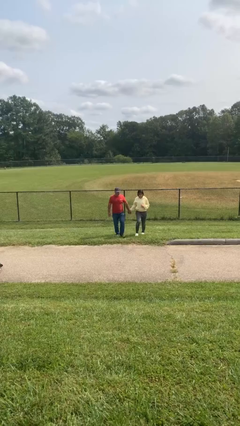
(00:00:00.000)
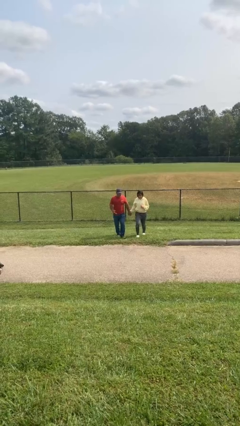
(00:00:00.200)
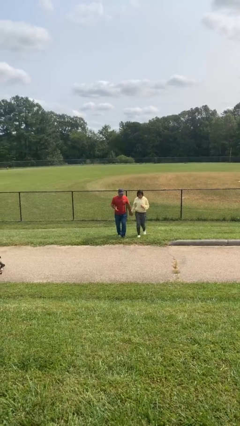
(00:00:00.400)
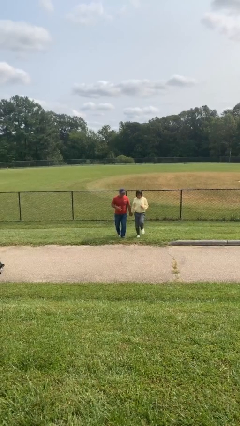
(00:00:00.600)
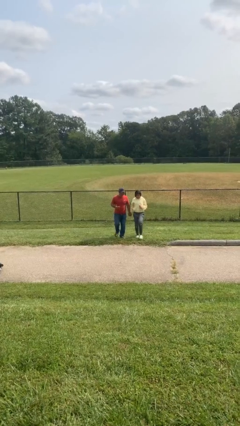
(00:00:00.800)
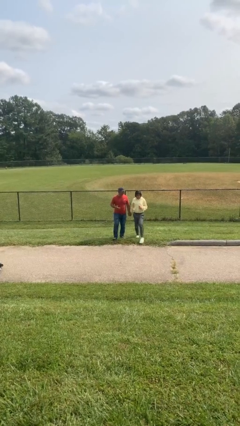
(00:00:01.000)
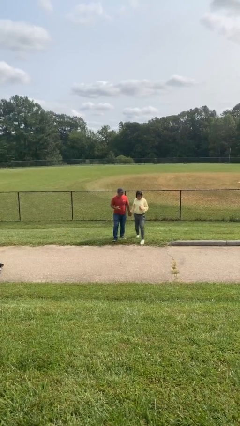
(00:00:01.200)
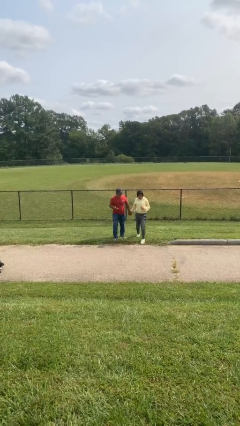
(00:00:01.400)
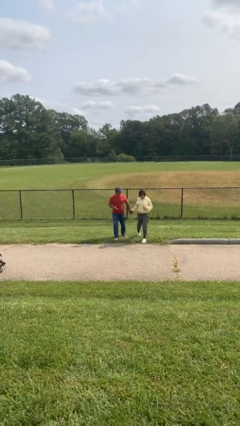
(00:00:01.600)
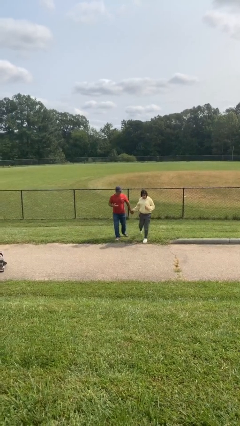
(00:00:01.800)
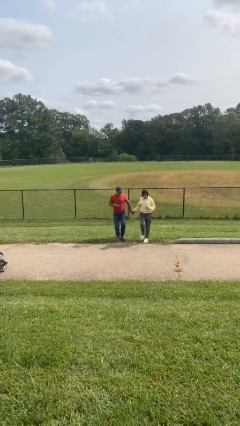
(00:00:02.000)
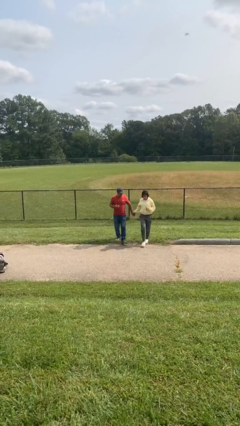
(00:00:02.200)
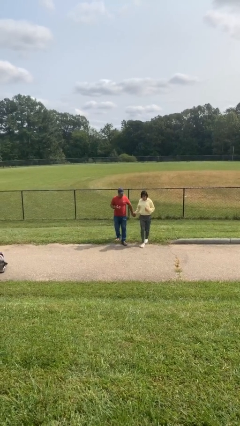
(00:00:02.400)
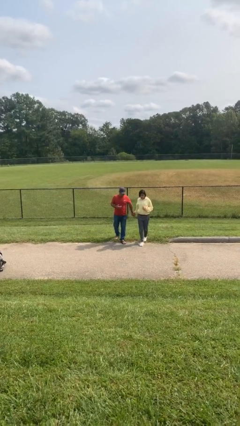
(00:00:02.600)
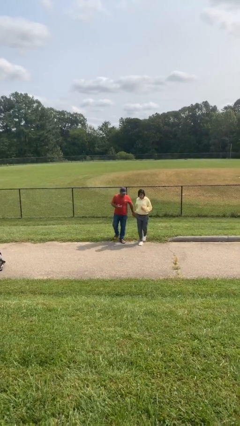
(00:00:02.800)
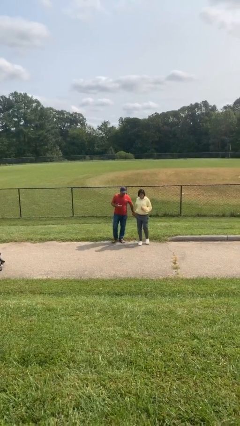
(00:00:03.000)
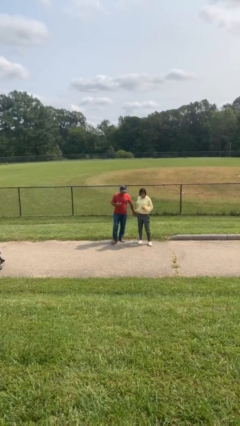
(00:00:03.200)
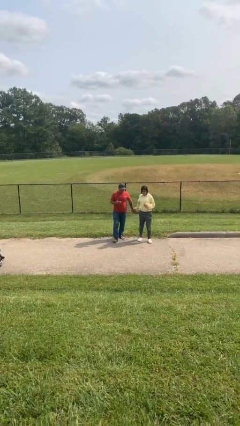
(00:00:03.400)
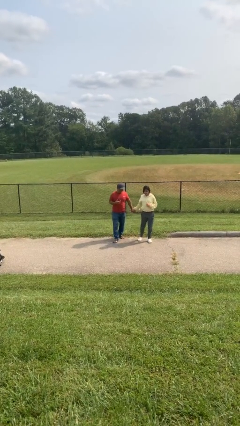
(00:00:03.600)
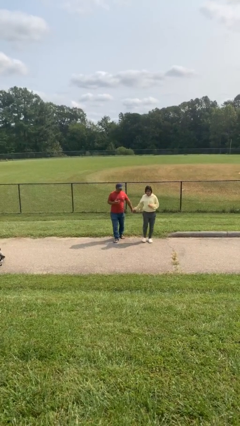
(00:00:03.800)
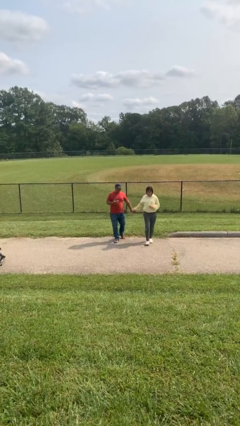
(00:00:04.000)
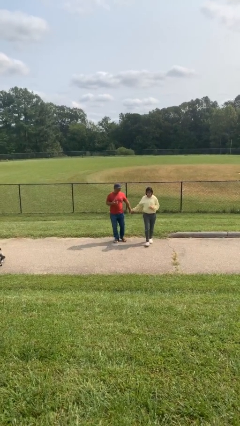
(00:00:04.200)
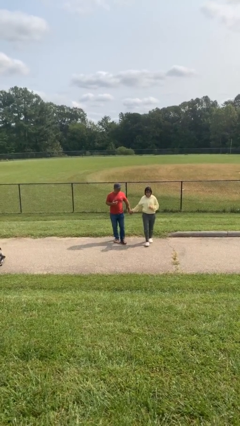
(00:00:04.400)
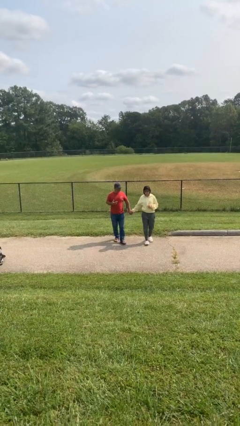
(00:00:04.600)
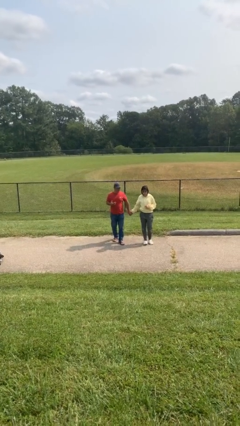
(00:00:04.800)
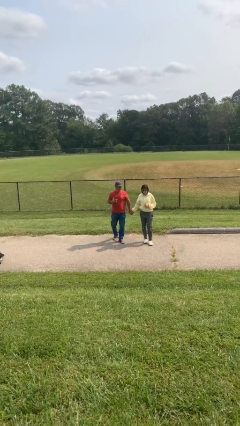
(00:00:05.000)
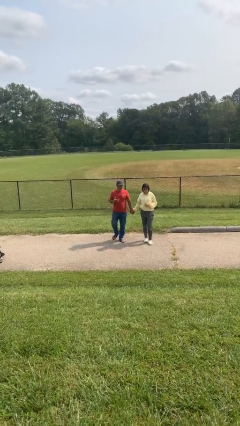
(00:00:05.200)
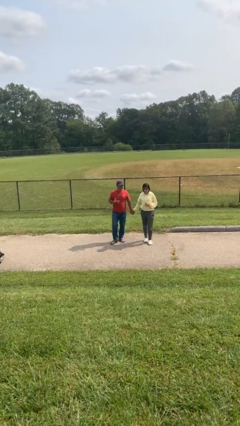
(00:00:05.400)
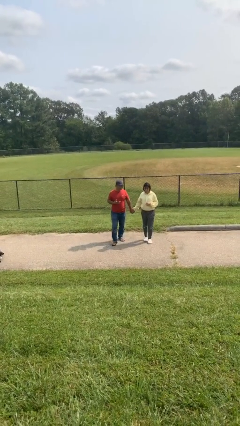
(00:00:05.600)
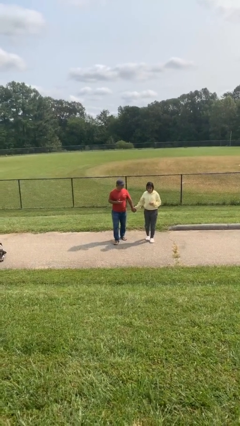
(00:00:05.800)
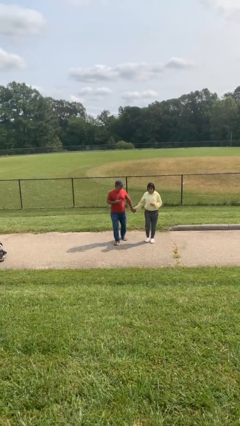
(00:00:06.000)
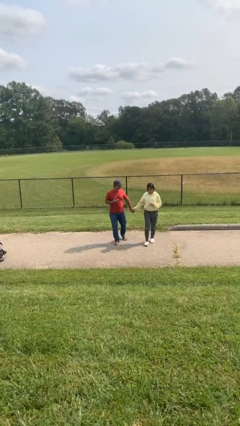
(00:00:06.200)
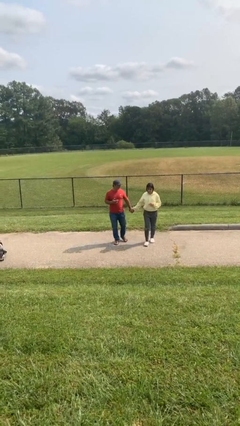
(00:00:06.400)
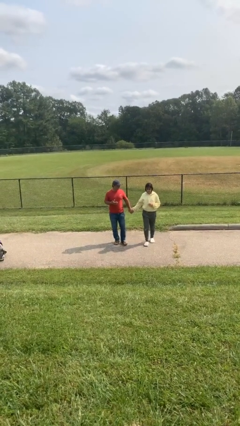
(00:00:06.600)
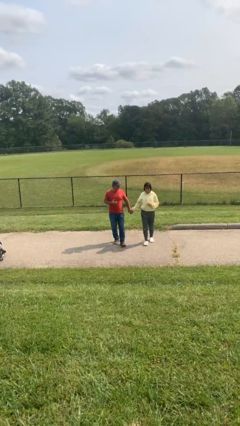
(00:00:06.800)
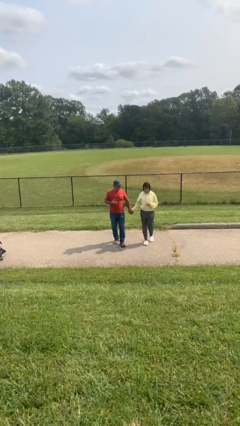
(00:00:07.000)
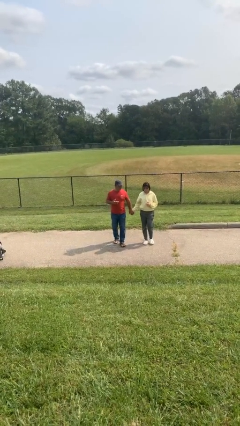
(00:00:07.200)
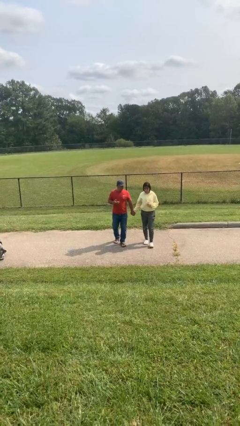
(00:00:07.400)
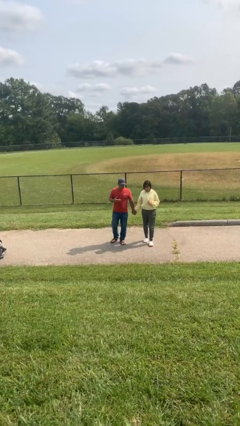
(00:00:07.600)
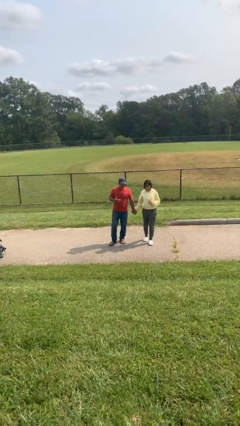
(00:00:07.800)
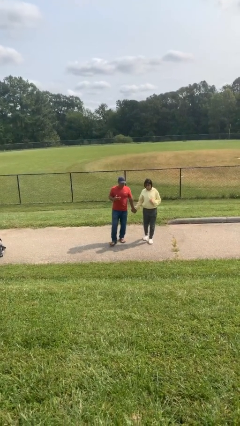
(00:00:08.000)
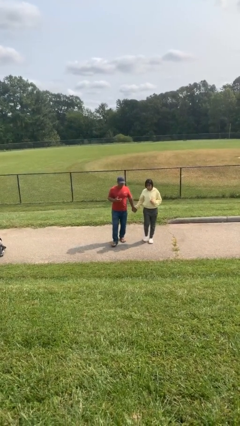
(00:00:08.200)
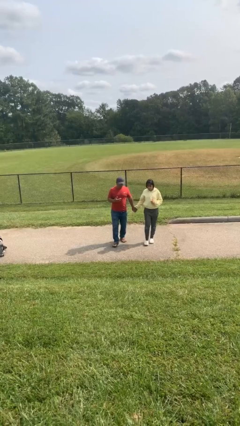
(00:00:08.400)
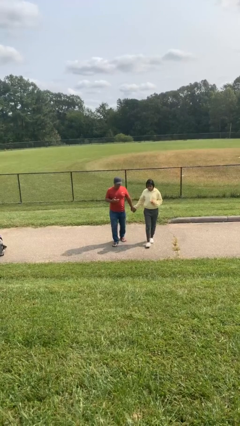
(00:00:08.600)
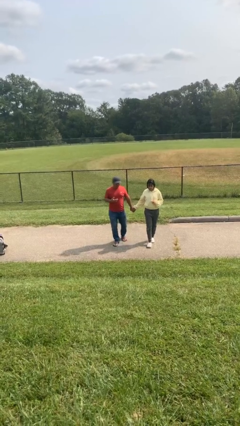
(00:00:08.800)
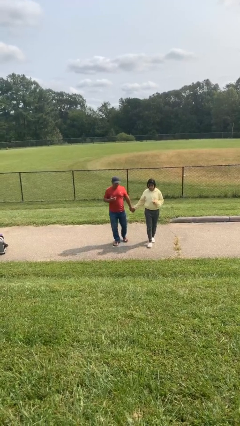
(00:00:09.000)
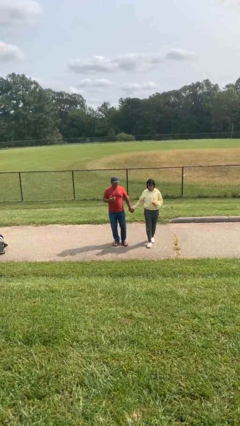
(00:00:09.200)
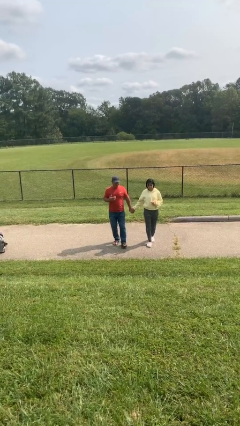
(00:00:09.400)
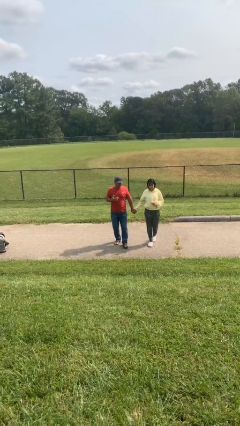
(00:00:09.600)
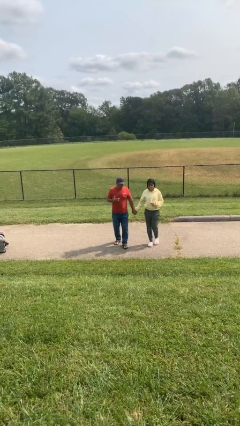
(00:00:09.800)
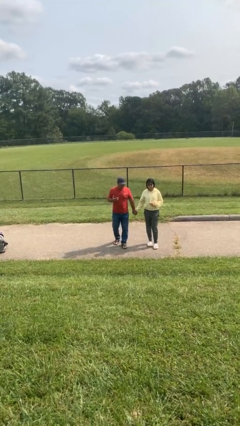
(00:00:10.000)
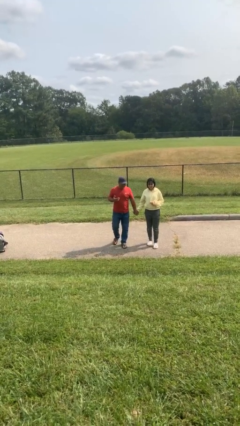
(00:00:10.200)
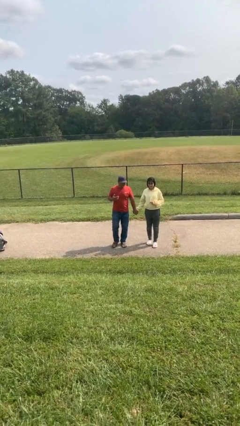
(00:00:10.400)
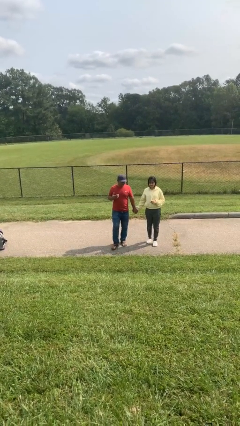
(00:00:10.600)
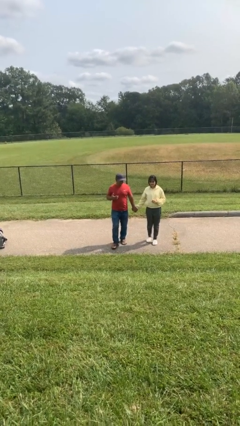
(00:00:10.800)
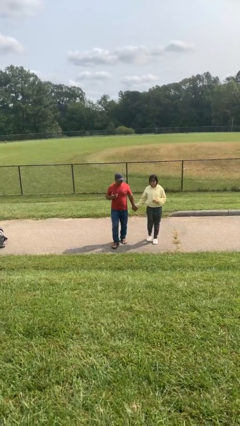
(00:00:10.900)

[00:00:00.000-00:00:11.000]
person holds hand

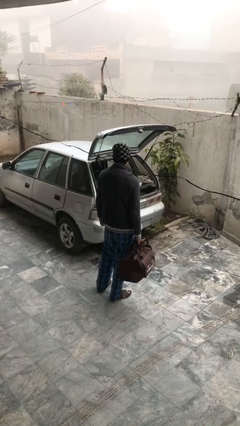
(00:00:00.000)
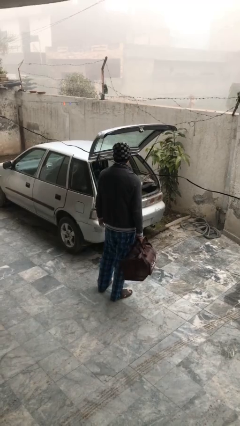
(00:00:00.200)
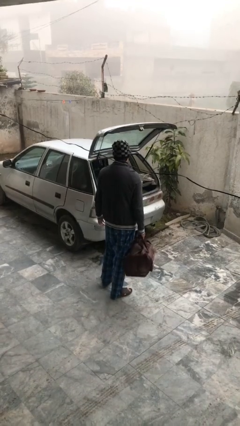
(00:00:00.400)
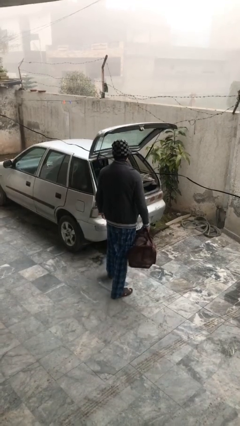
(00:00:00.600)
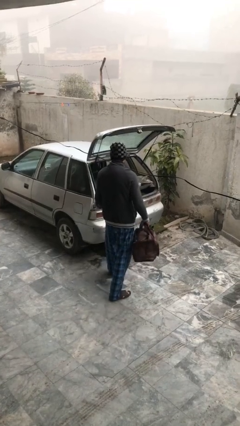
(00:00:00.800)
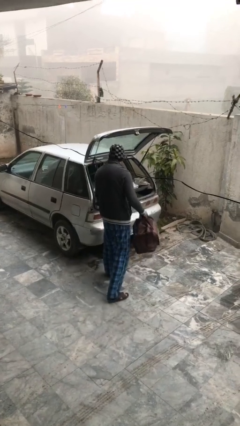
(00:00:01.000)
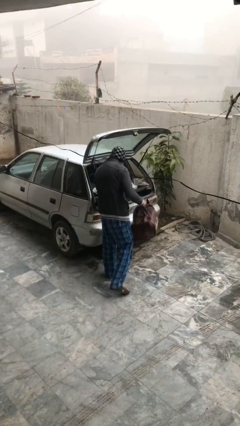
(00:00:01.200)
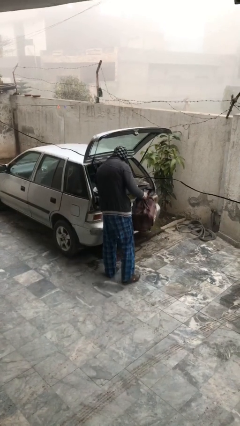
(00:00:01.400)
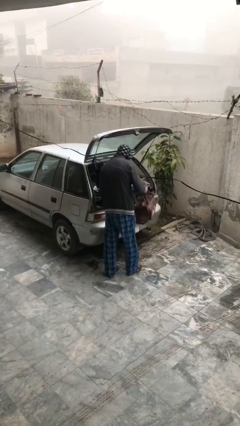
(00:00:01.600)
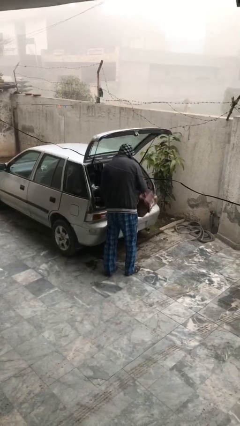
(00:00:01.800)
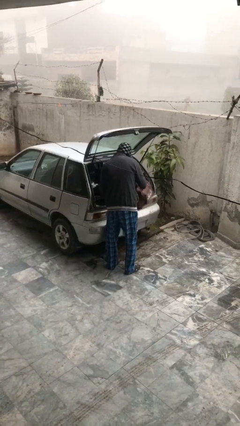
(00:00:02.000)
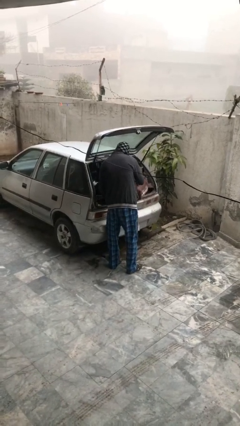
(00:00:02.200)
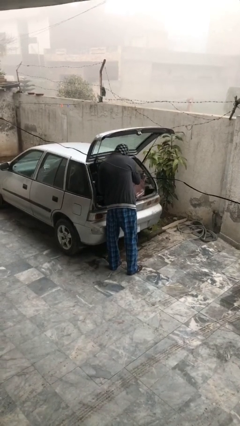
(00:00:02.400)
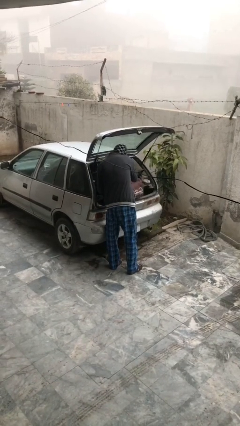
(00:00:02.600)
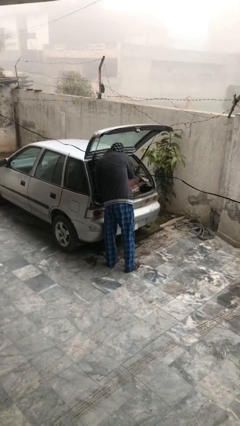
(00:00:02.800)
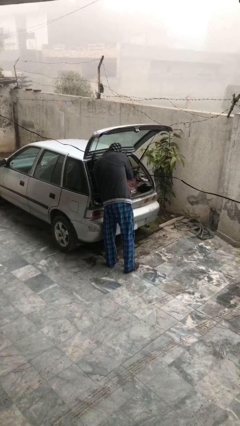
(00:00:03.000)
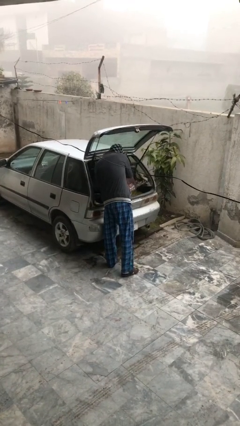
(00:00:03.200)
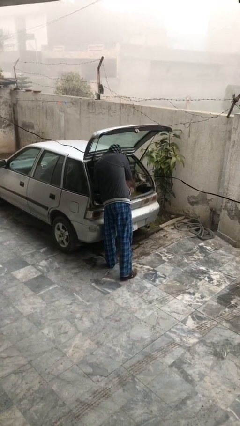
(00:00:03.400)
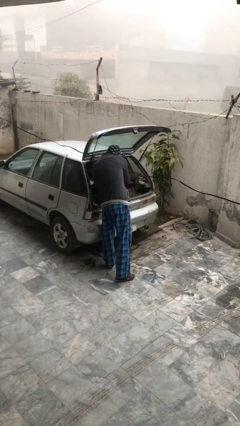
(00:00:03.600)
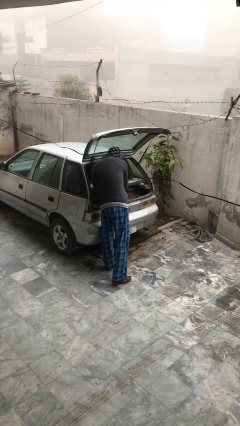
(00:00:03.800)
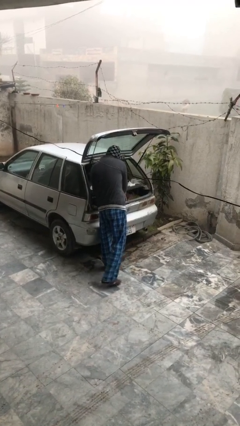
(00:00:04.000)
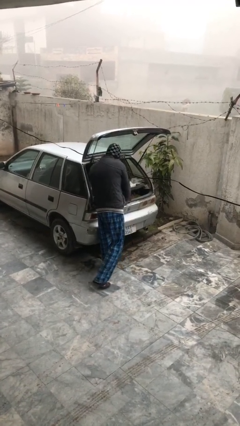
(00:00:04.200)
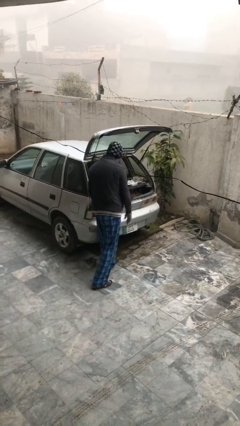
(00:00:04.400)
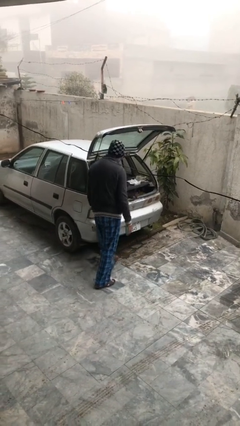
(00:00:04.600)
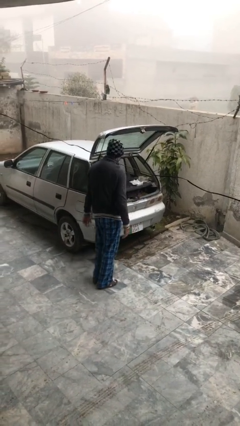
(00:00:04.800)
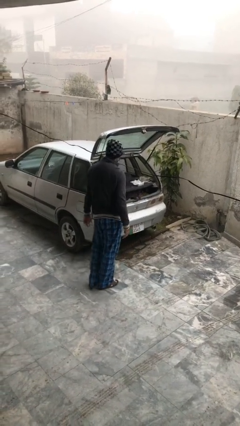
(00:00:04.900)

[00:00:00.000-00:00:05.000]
person loads car

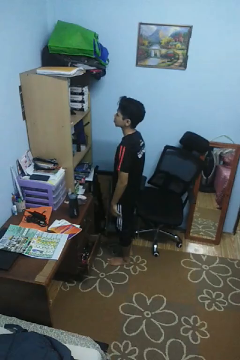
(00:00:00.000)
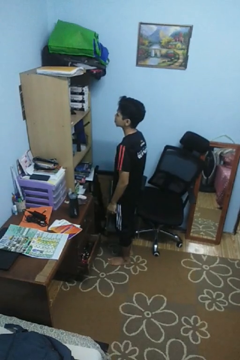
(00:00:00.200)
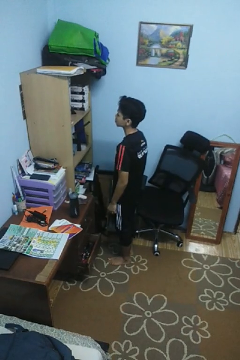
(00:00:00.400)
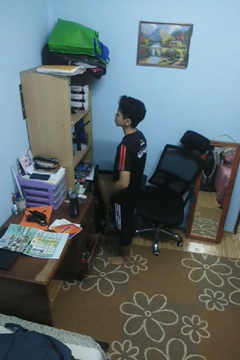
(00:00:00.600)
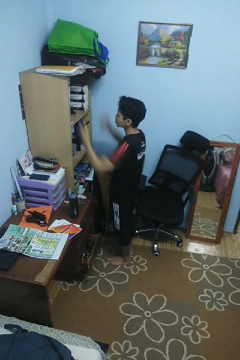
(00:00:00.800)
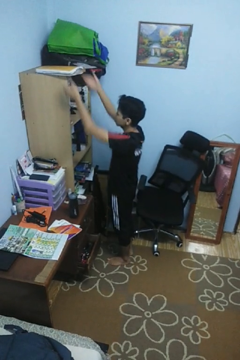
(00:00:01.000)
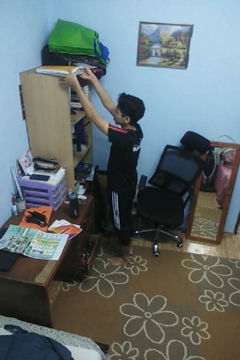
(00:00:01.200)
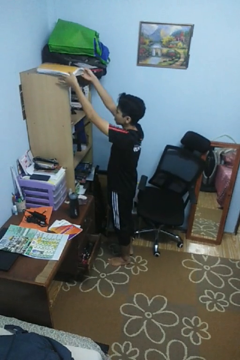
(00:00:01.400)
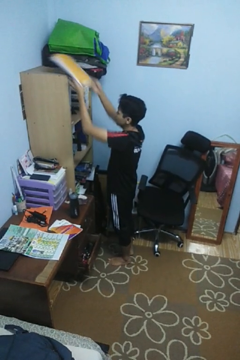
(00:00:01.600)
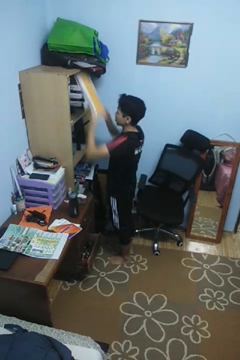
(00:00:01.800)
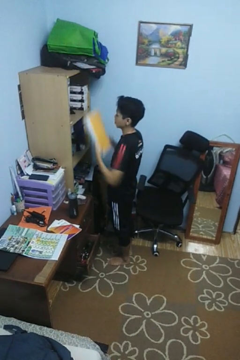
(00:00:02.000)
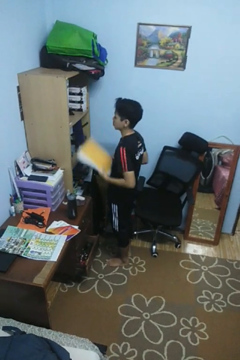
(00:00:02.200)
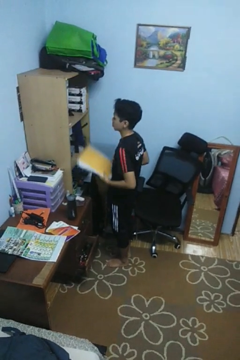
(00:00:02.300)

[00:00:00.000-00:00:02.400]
person picks up object from shelf
